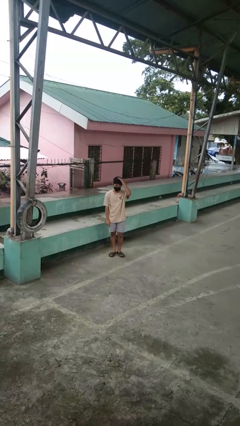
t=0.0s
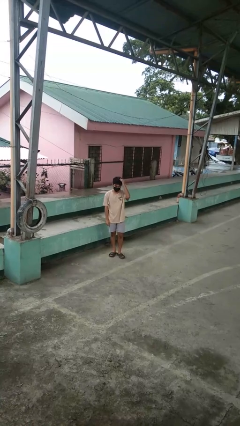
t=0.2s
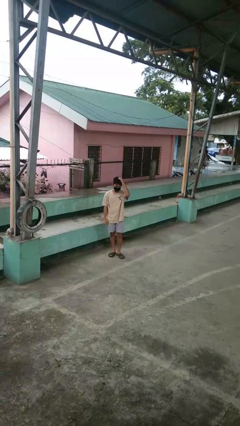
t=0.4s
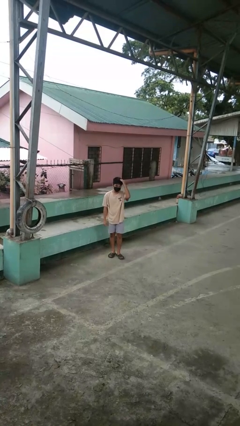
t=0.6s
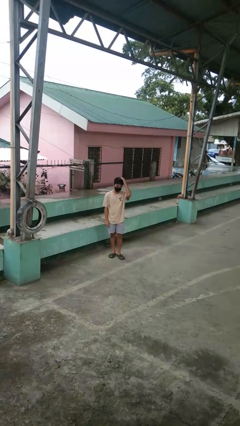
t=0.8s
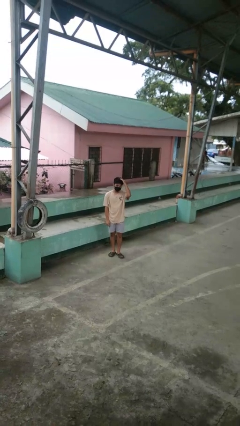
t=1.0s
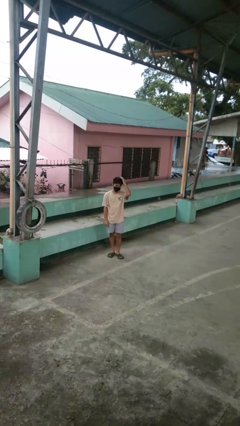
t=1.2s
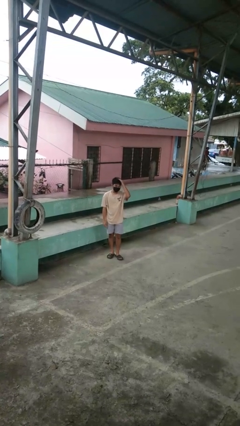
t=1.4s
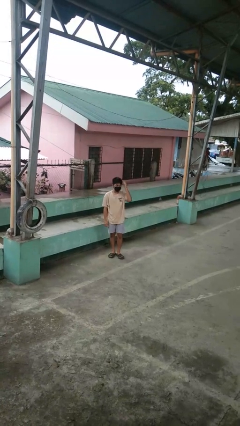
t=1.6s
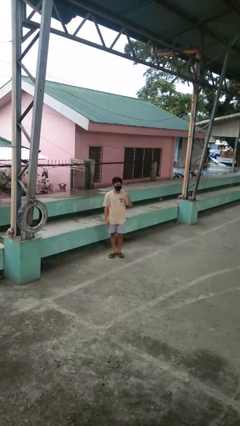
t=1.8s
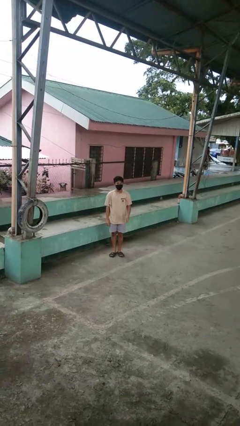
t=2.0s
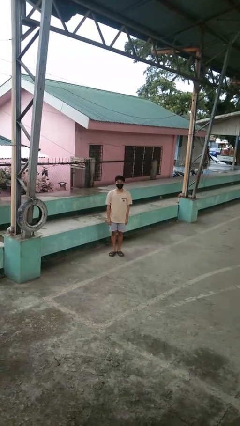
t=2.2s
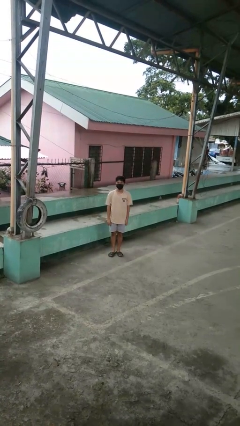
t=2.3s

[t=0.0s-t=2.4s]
person pats head

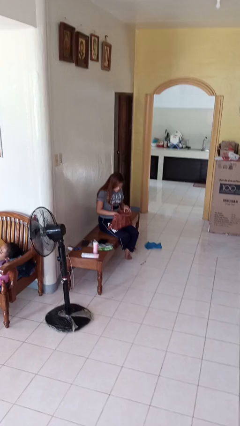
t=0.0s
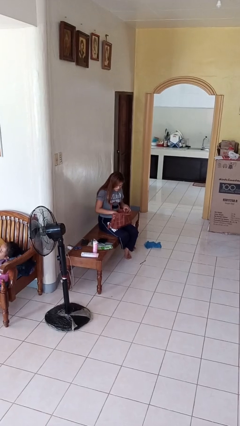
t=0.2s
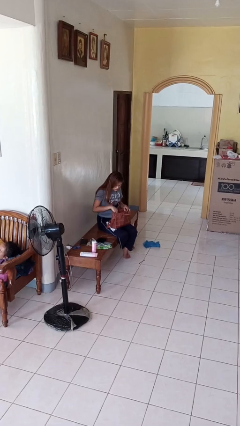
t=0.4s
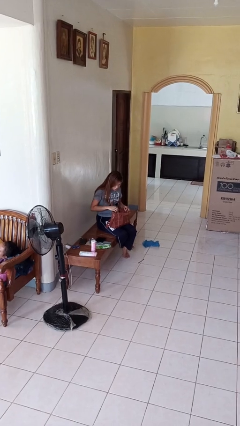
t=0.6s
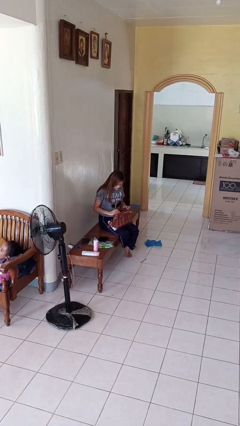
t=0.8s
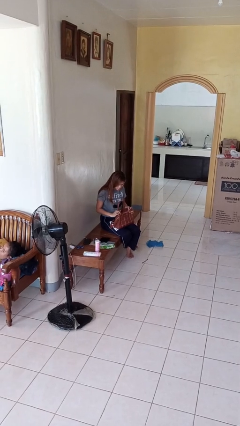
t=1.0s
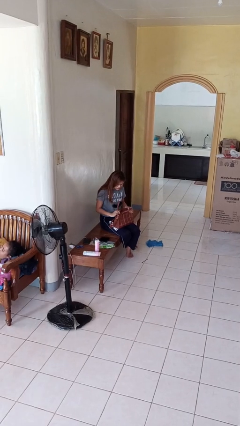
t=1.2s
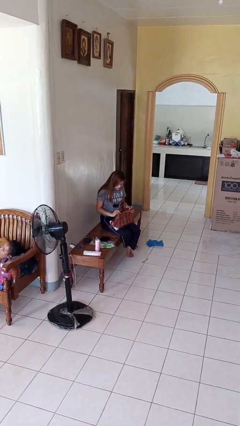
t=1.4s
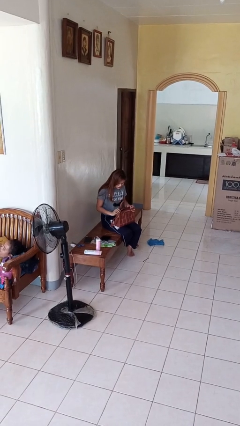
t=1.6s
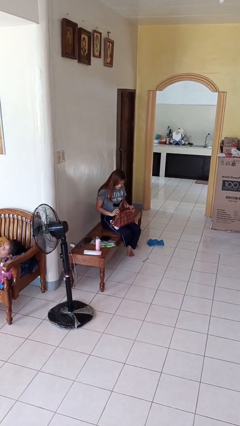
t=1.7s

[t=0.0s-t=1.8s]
person puts object into purse

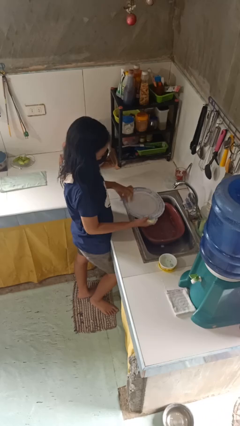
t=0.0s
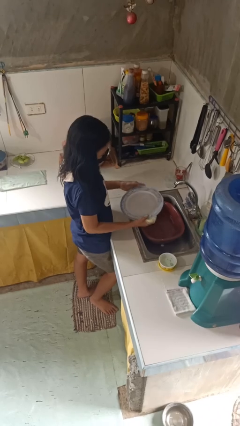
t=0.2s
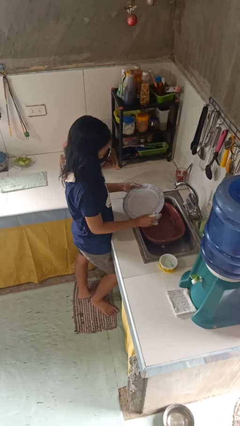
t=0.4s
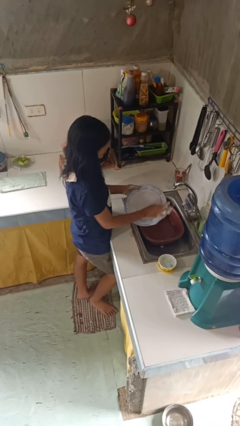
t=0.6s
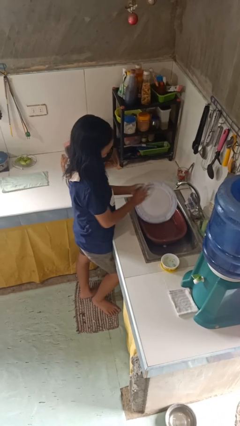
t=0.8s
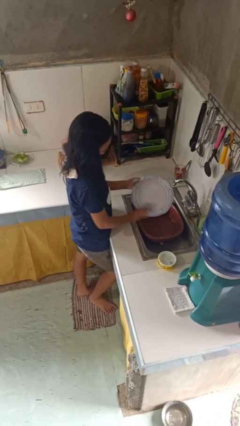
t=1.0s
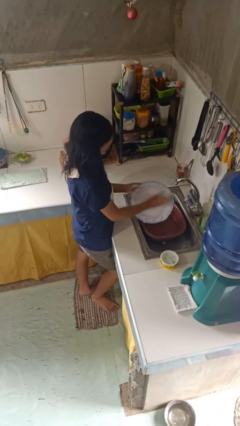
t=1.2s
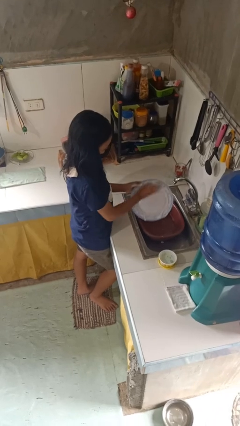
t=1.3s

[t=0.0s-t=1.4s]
person washes dish

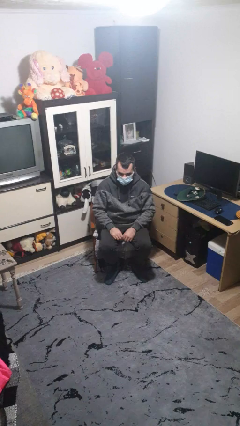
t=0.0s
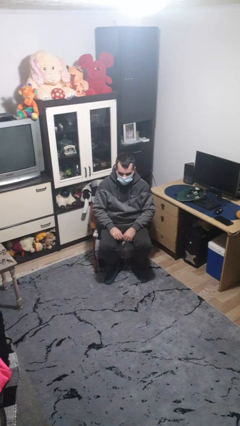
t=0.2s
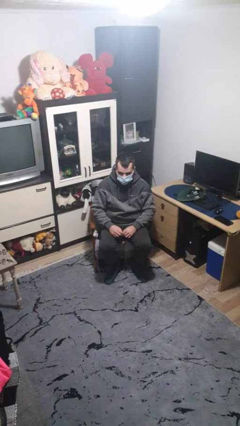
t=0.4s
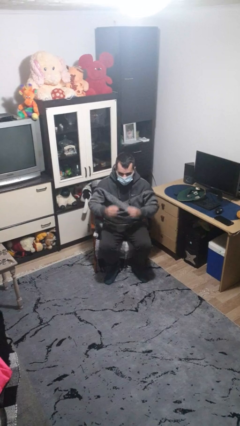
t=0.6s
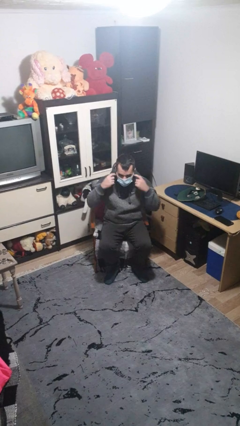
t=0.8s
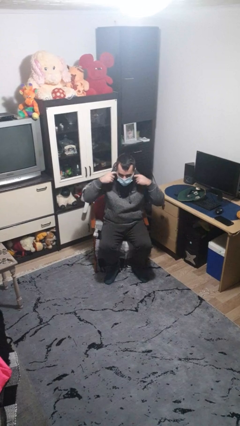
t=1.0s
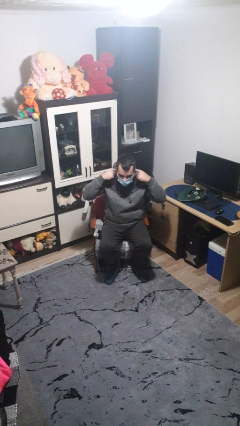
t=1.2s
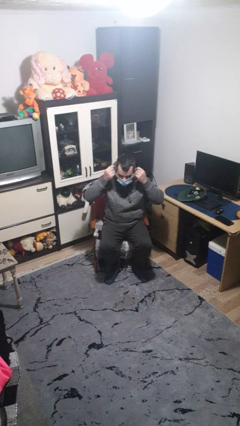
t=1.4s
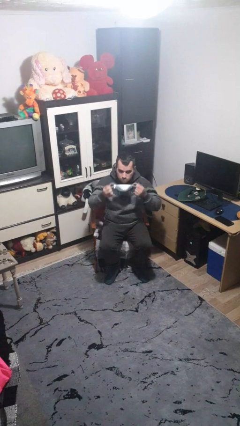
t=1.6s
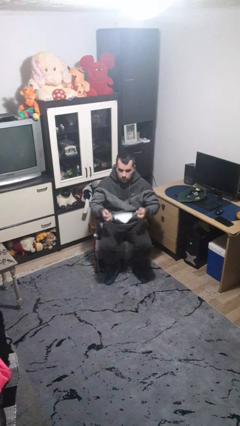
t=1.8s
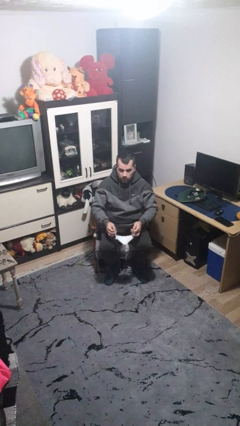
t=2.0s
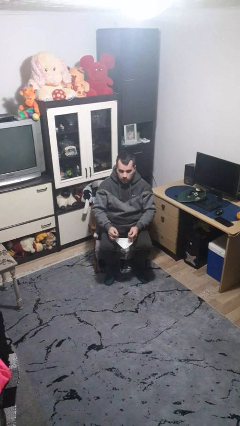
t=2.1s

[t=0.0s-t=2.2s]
person takes off facemask

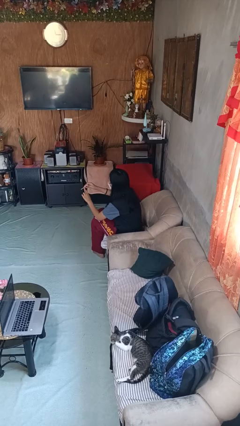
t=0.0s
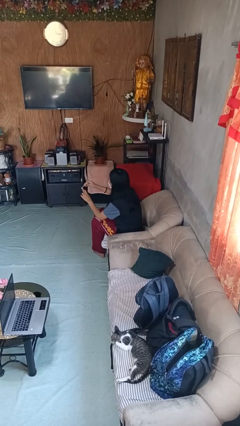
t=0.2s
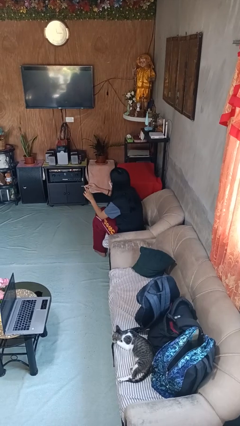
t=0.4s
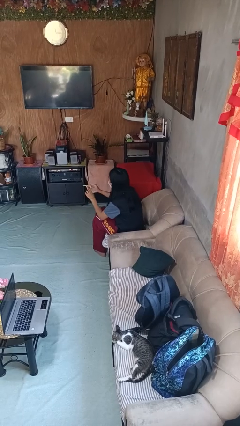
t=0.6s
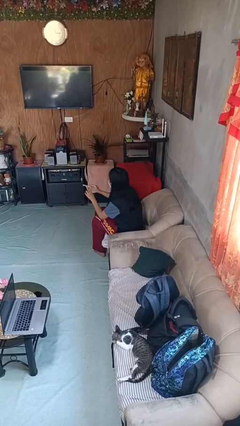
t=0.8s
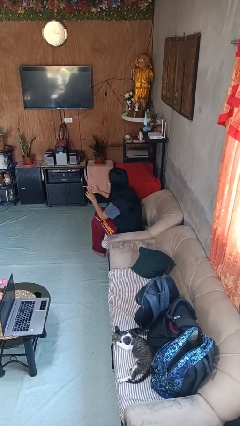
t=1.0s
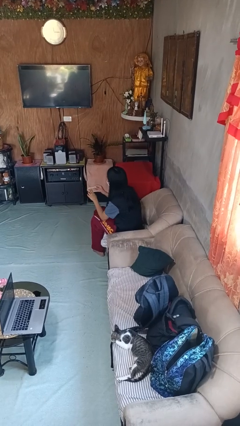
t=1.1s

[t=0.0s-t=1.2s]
person files fingernails

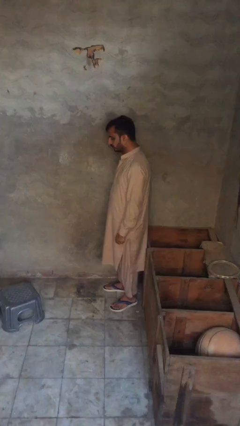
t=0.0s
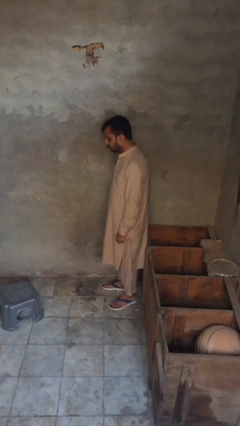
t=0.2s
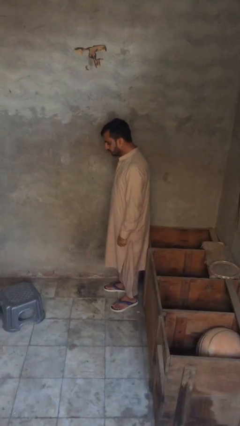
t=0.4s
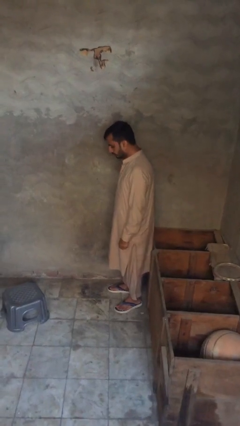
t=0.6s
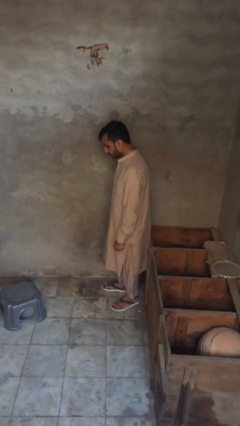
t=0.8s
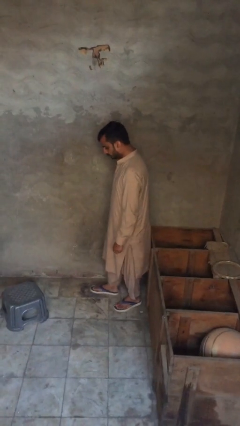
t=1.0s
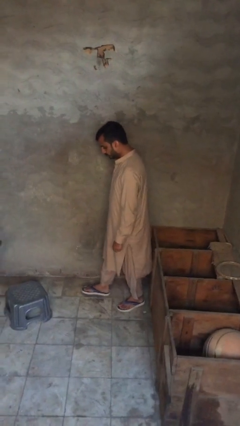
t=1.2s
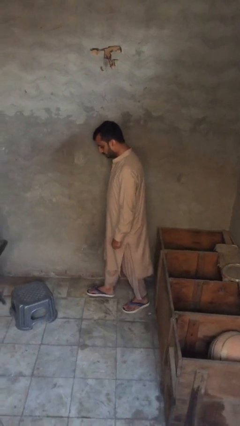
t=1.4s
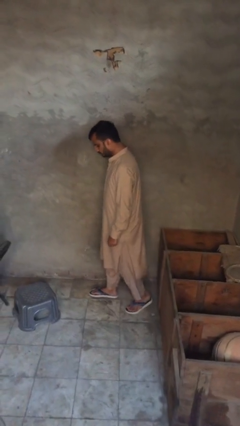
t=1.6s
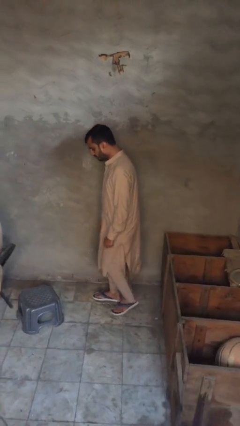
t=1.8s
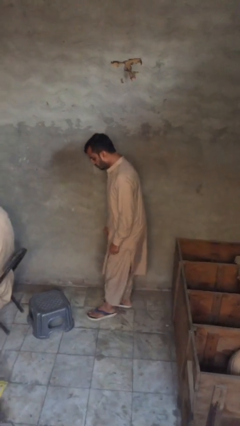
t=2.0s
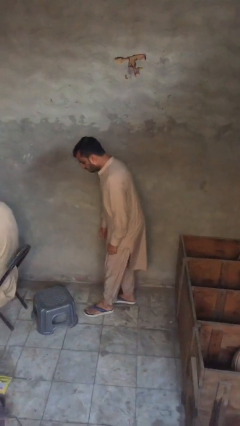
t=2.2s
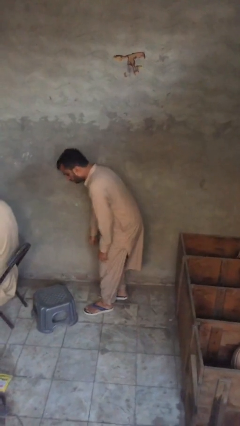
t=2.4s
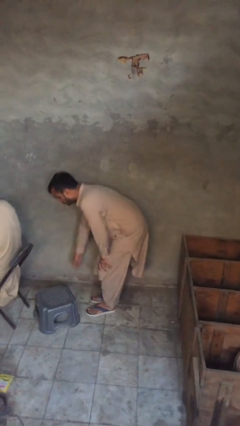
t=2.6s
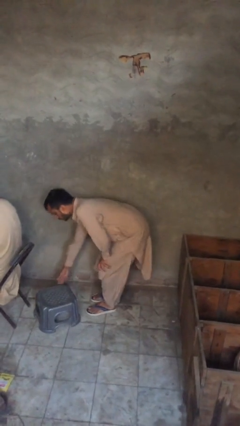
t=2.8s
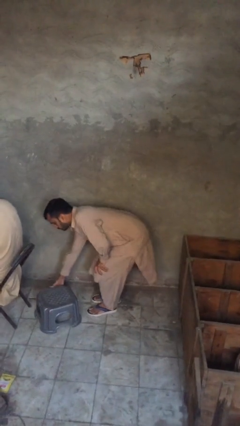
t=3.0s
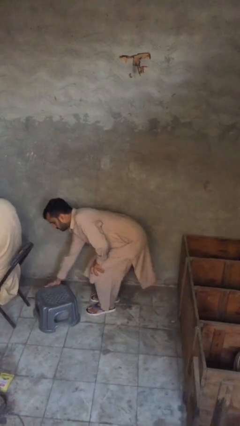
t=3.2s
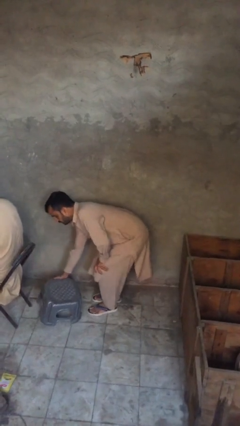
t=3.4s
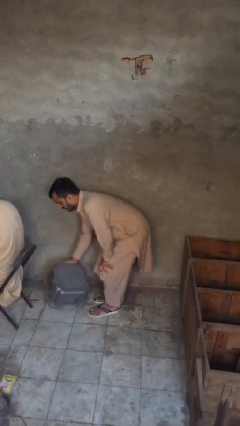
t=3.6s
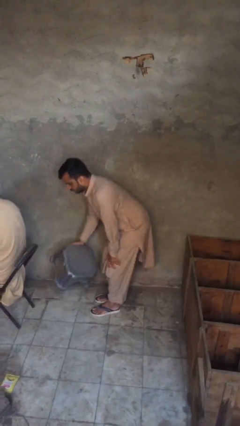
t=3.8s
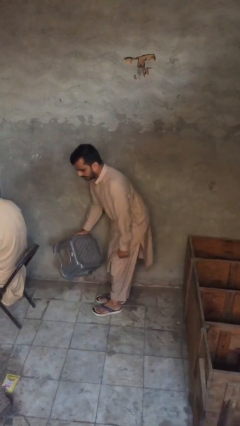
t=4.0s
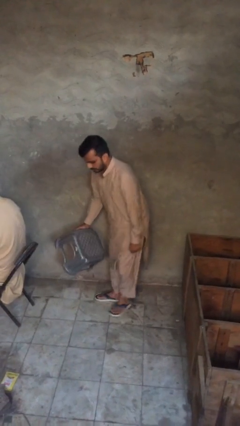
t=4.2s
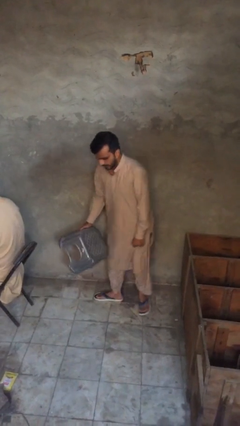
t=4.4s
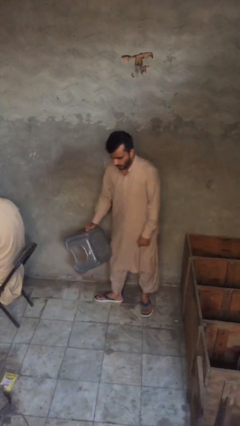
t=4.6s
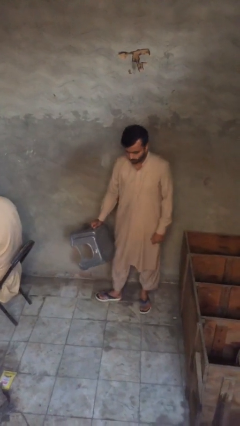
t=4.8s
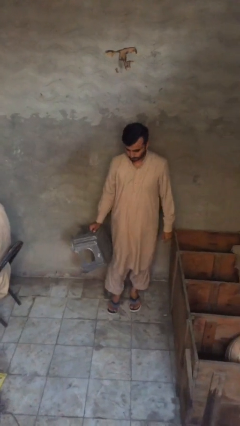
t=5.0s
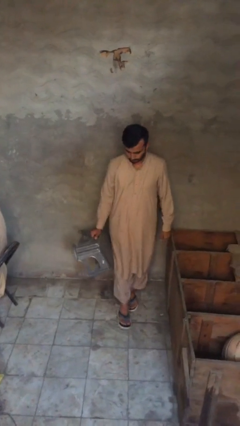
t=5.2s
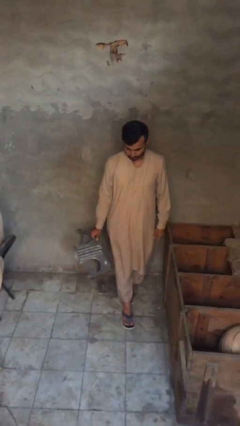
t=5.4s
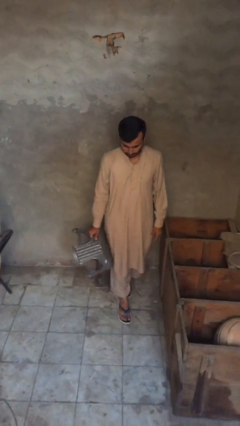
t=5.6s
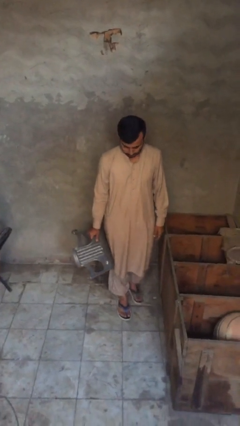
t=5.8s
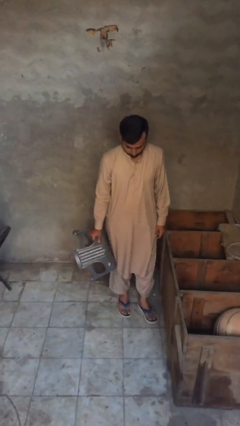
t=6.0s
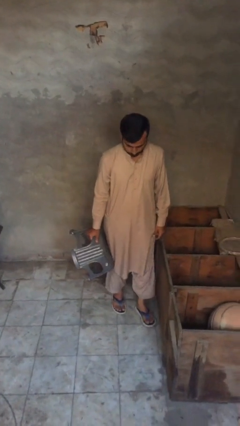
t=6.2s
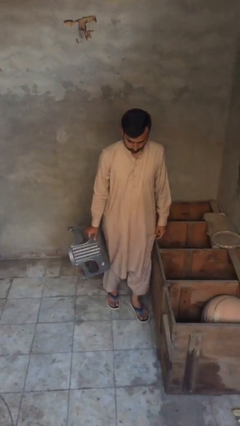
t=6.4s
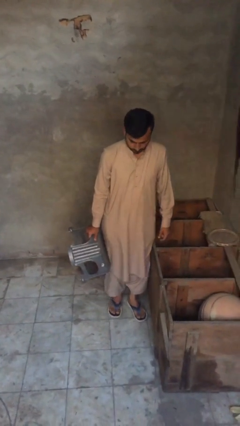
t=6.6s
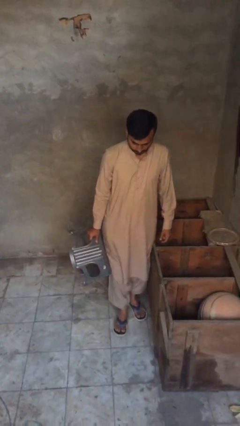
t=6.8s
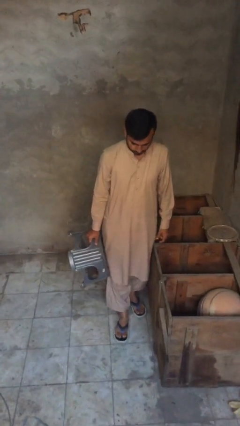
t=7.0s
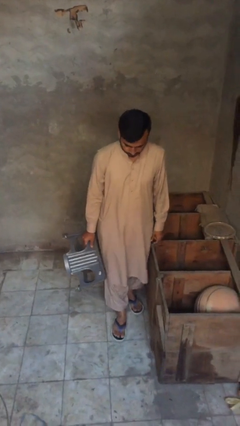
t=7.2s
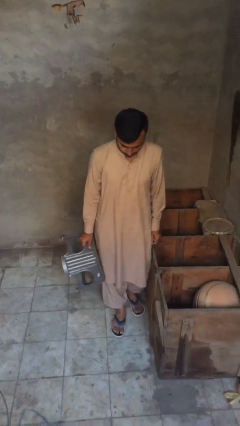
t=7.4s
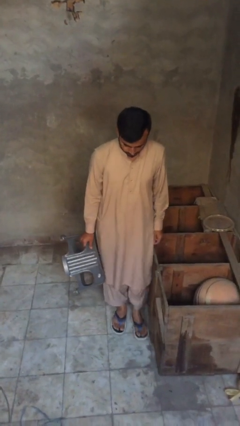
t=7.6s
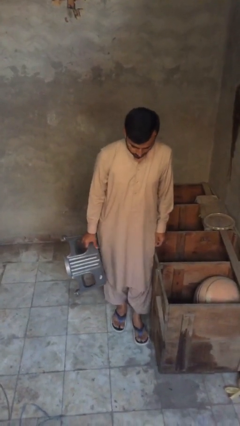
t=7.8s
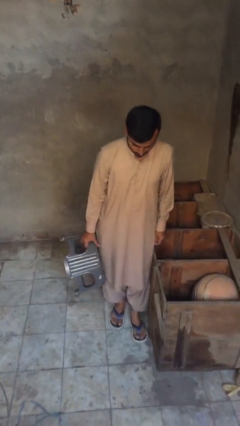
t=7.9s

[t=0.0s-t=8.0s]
person steals object from person
